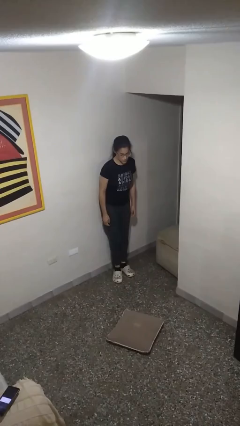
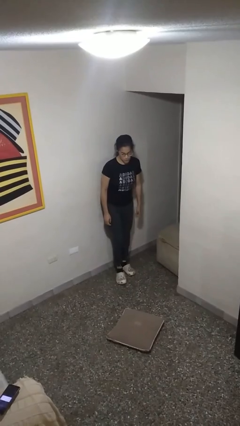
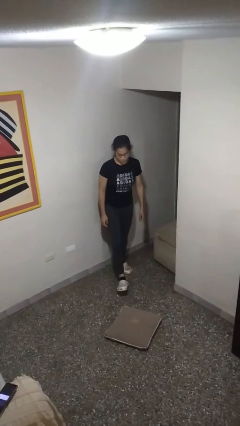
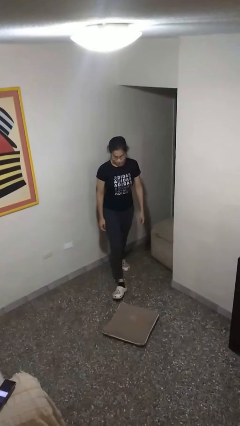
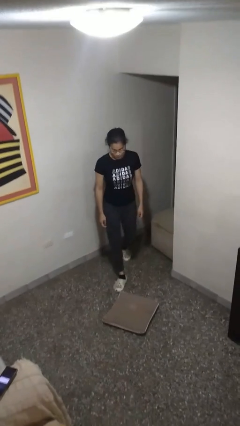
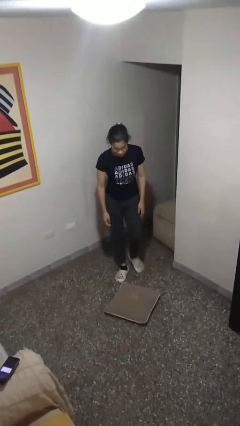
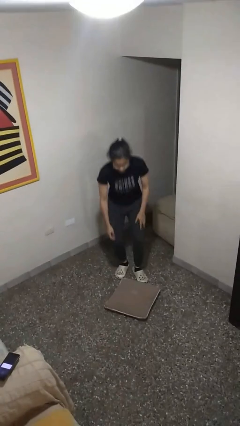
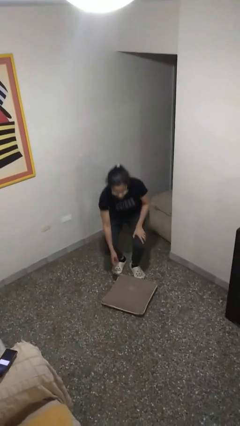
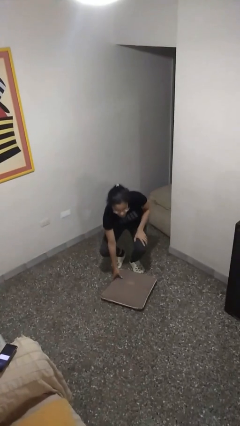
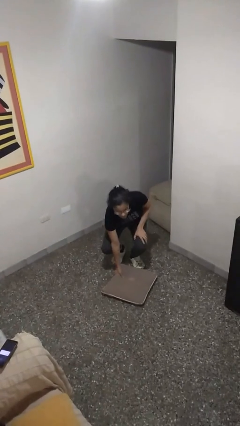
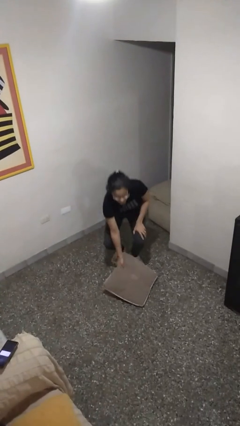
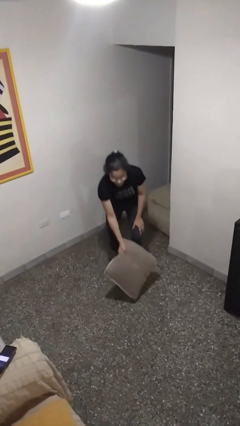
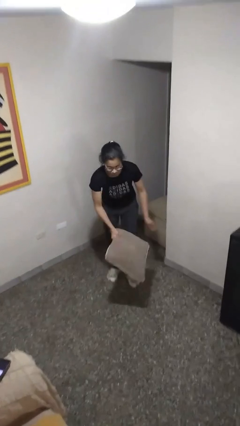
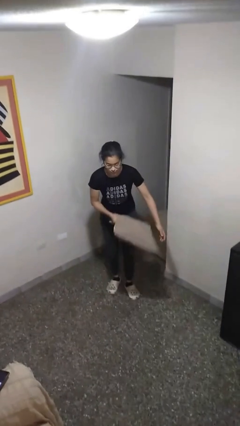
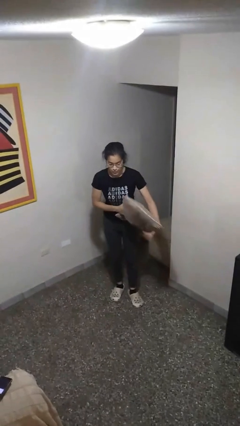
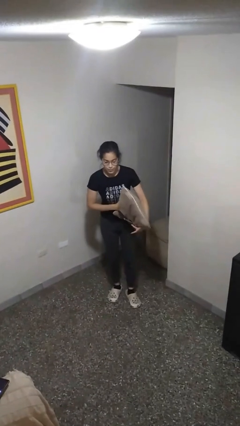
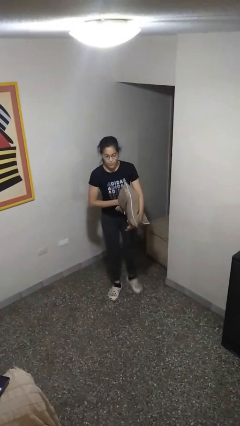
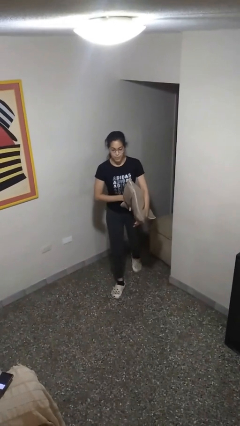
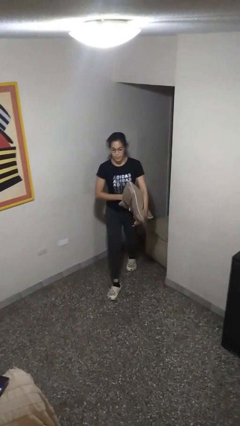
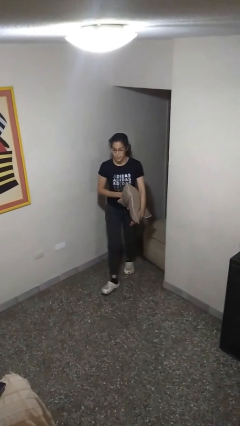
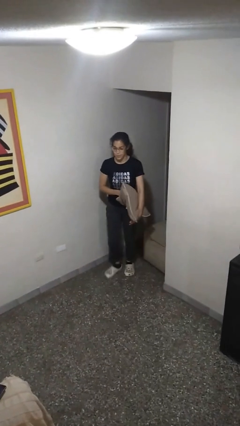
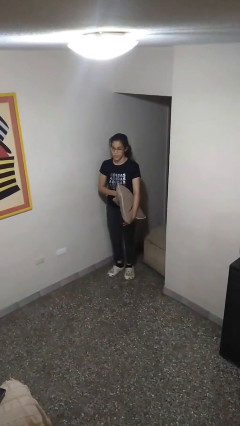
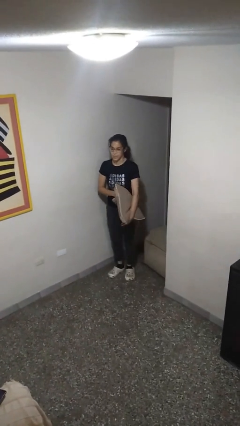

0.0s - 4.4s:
person picks up object from floor

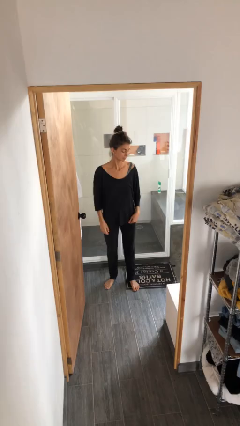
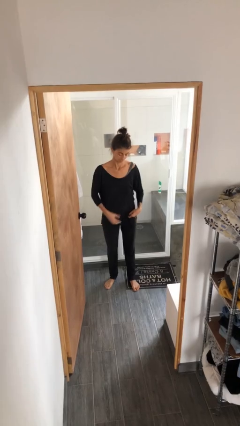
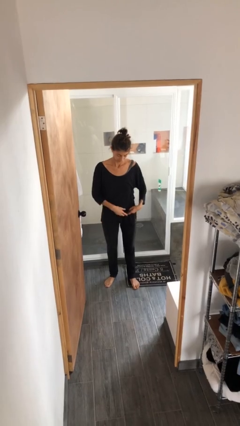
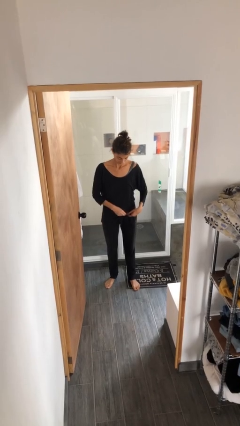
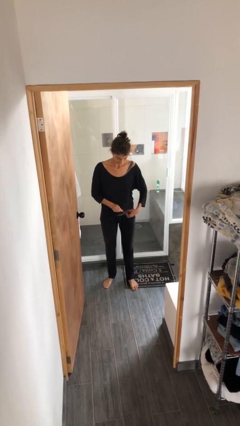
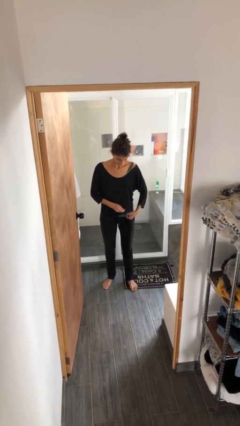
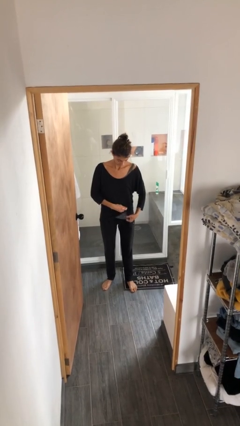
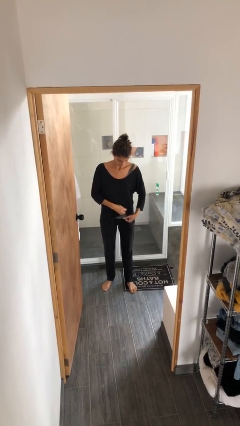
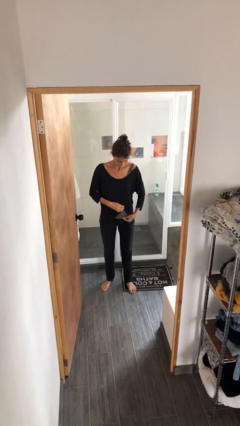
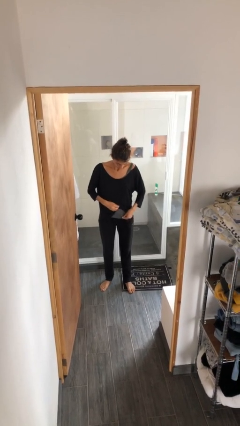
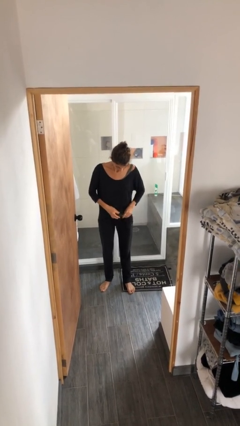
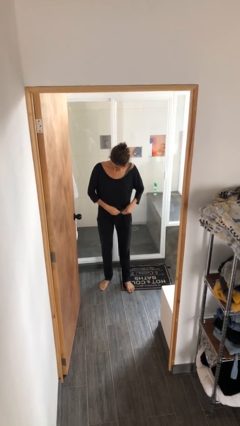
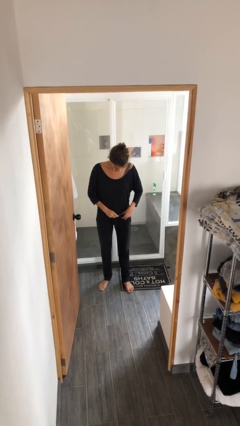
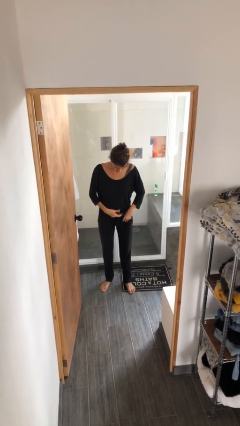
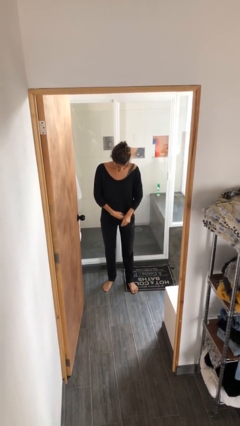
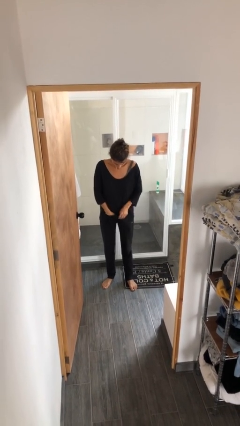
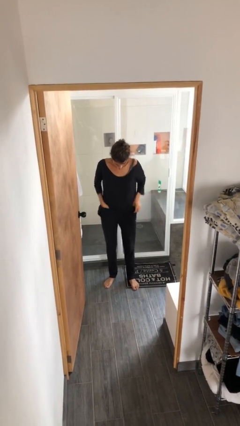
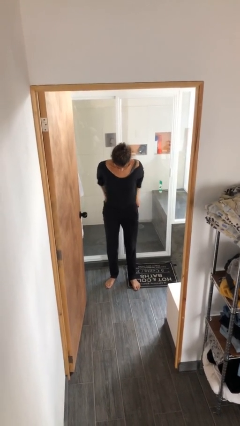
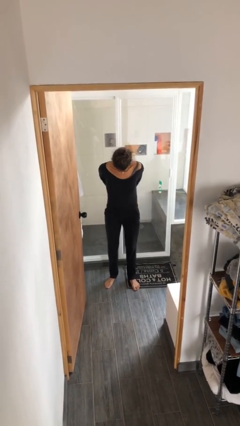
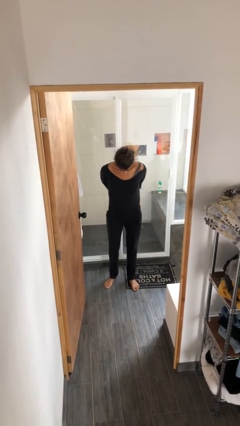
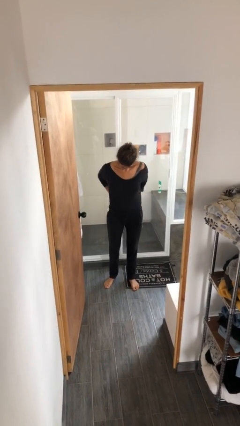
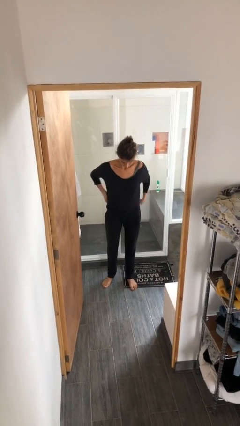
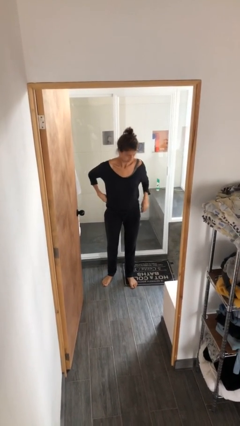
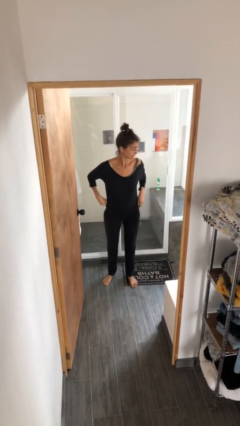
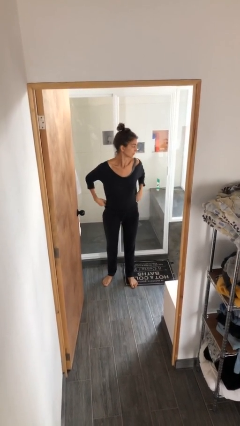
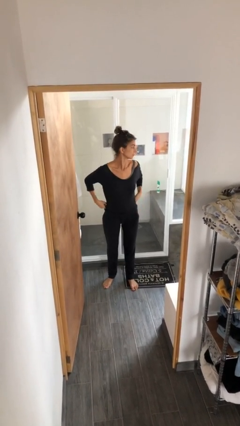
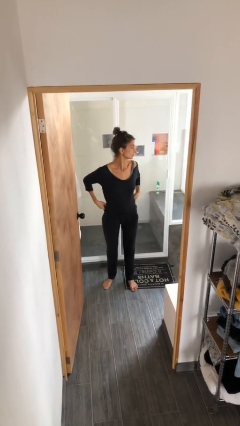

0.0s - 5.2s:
person tucks in shirt

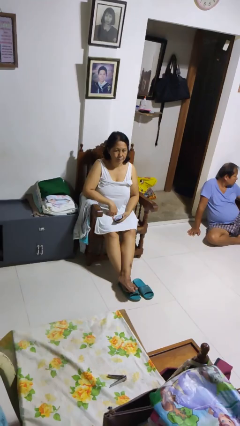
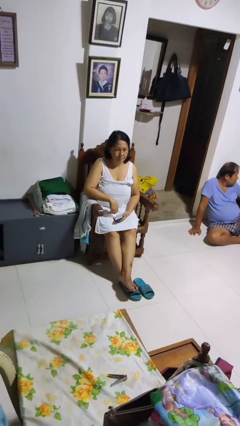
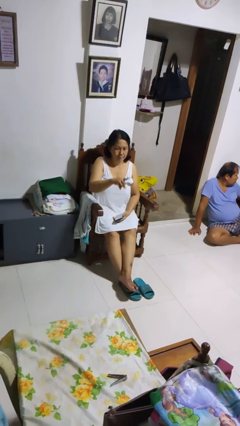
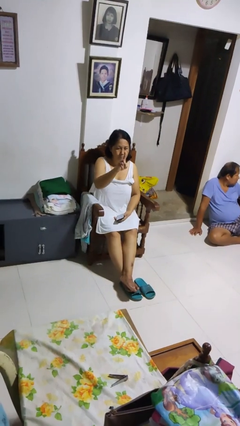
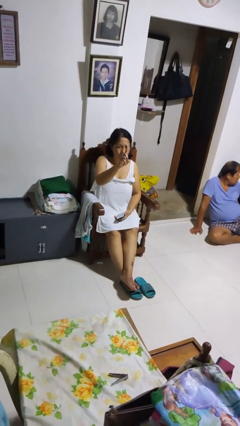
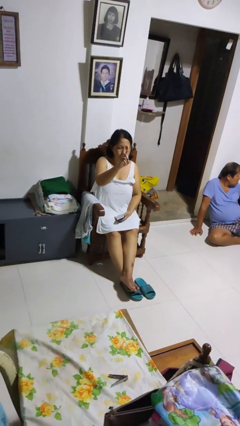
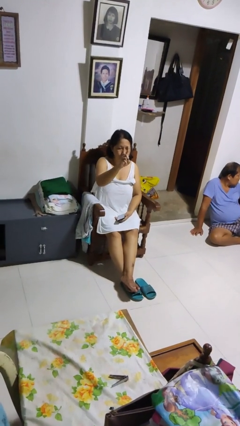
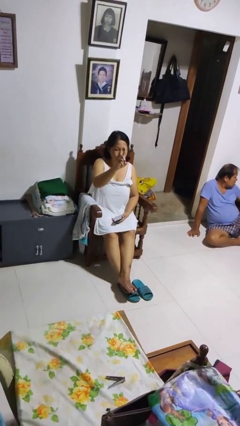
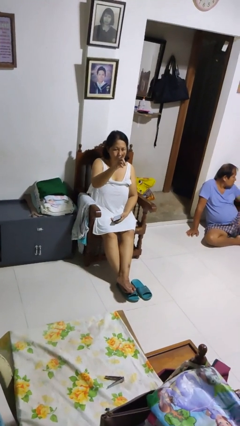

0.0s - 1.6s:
person gestures number one

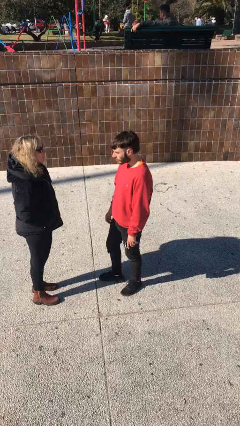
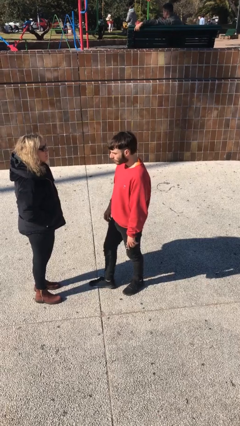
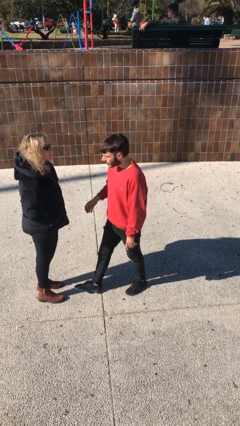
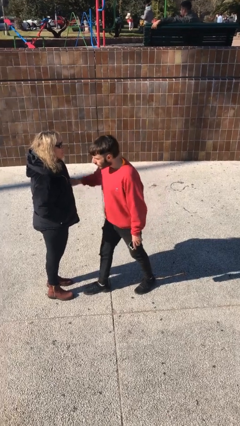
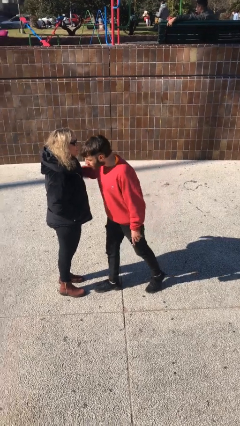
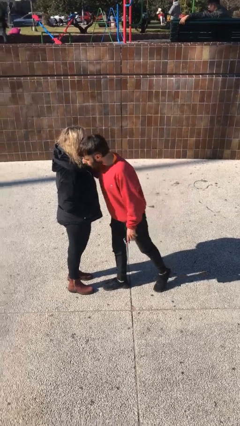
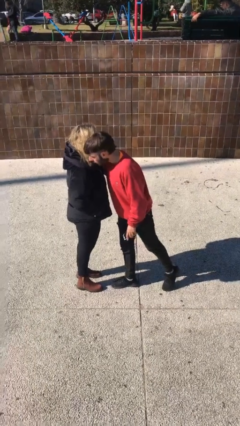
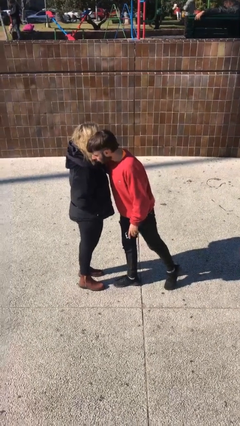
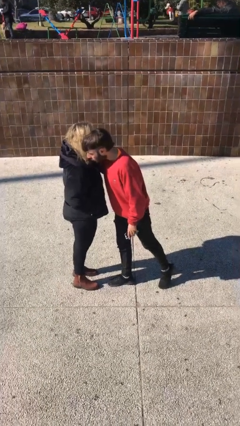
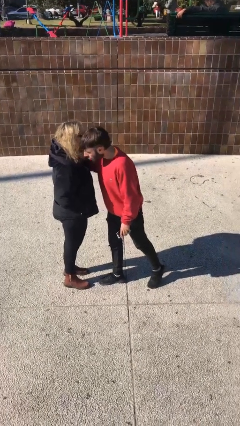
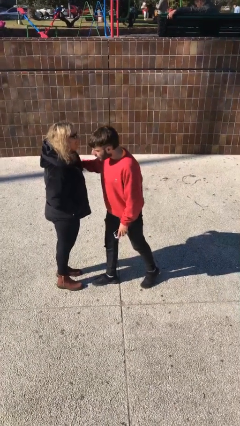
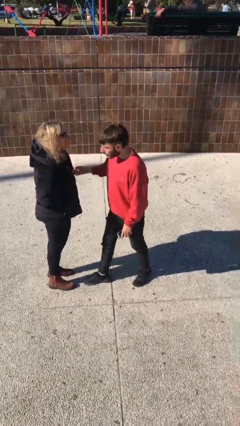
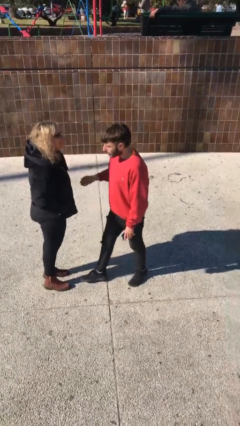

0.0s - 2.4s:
person kisses cheek of person

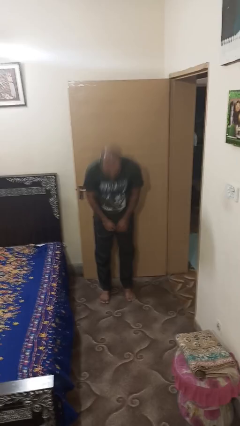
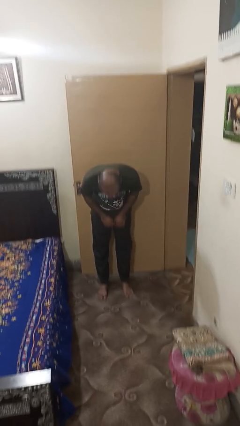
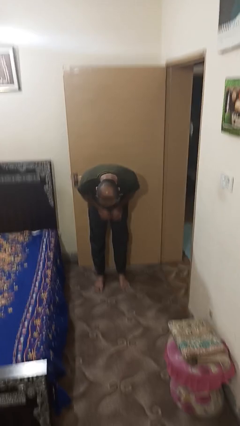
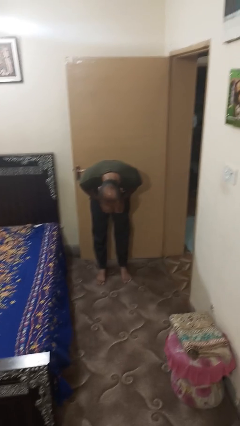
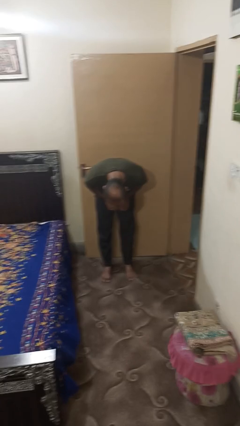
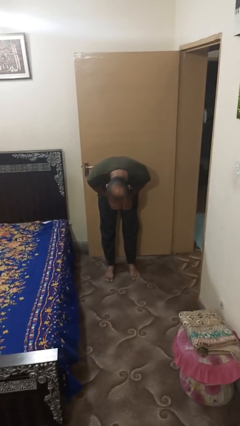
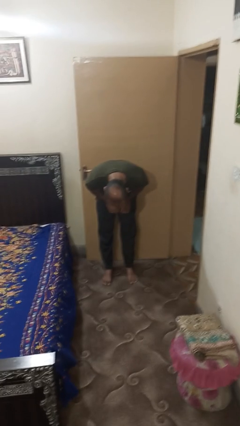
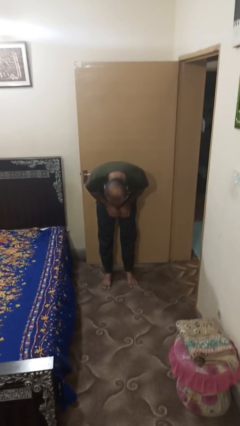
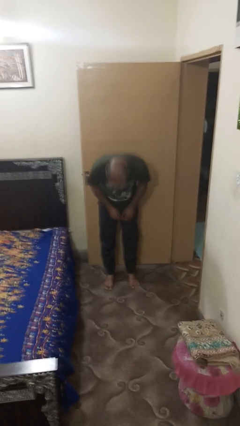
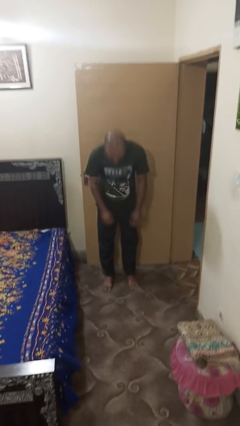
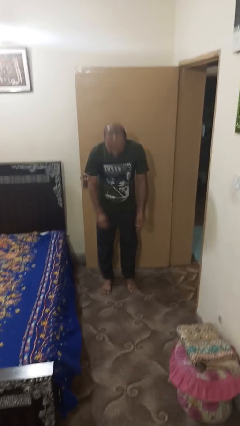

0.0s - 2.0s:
person bows

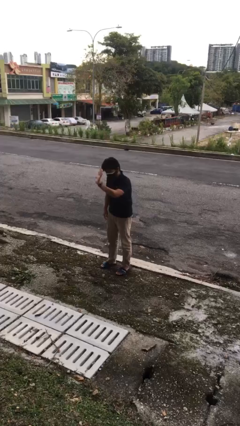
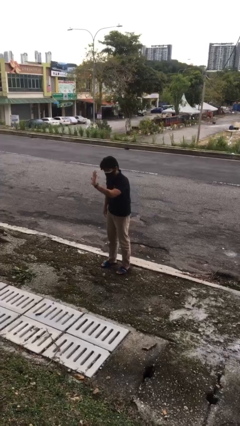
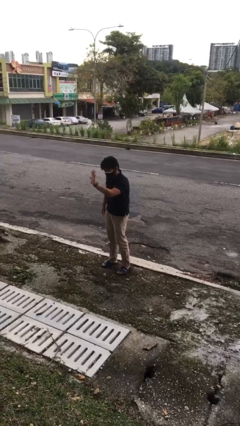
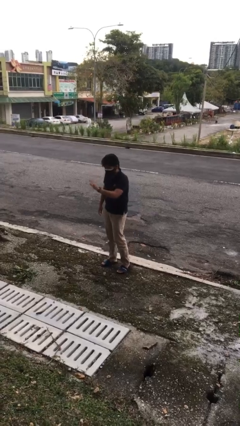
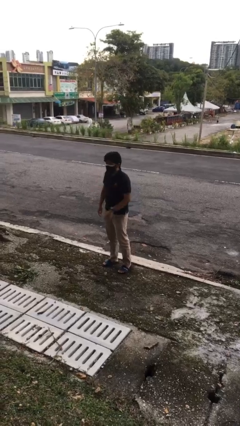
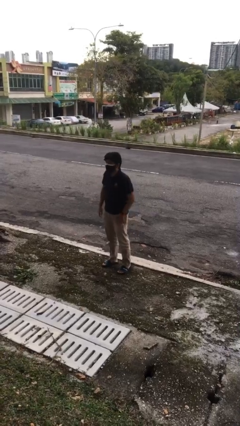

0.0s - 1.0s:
person gestures stop

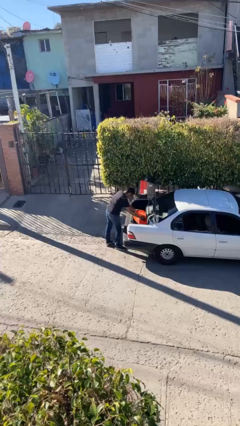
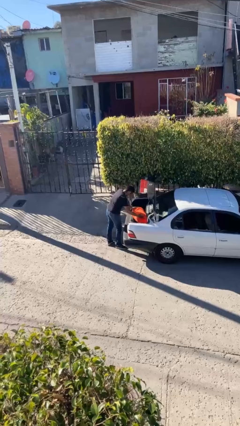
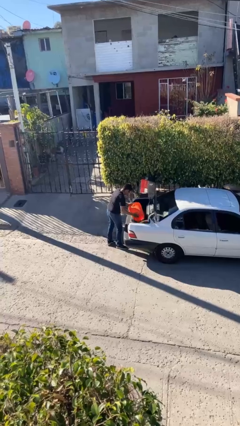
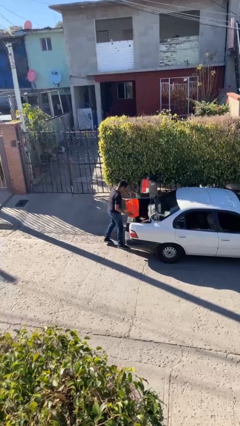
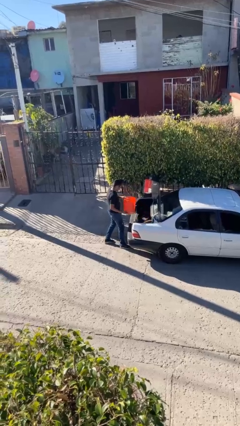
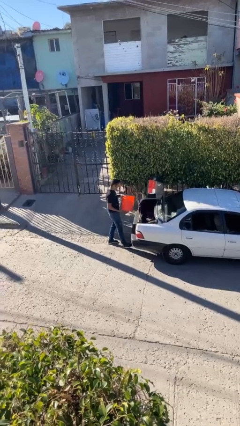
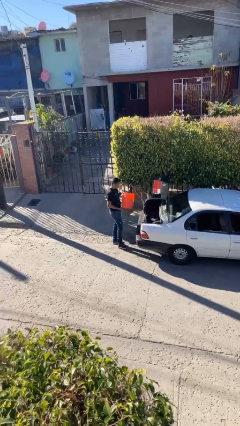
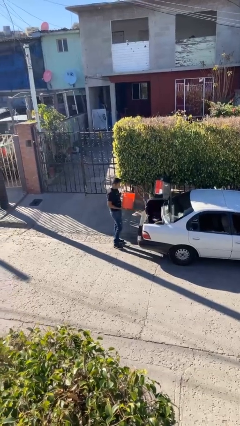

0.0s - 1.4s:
person unloads car
